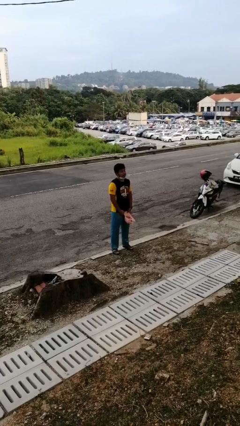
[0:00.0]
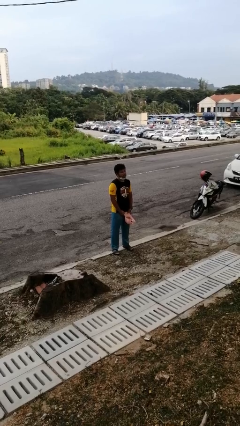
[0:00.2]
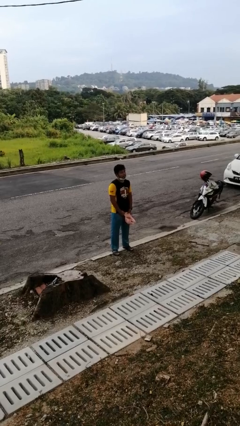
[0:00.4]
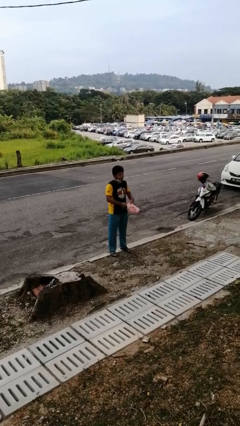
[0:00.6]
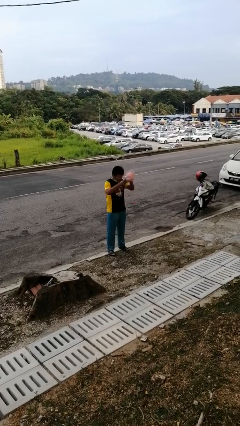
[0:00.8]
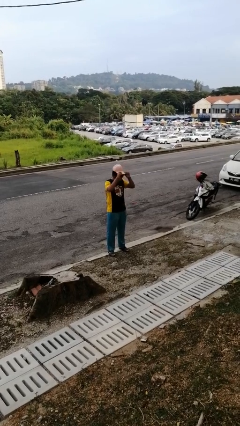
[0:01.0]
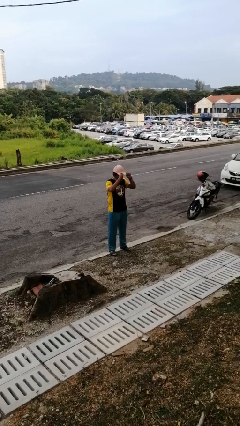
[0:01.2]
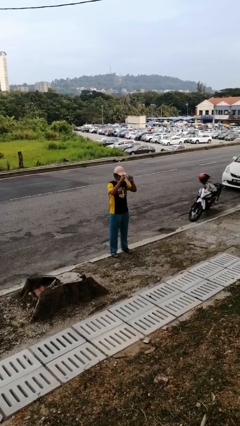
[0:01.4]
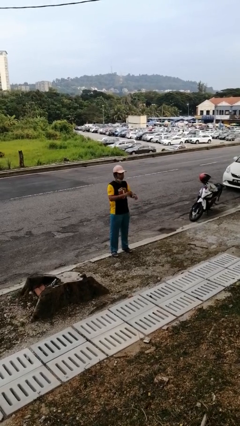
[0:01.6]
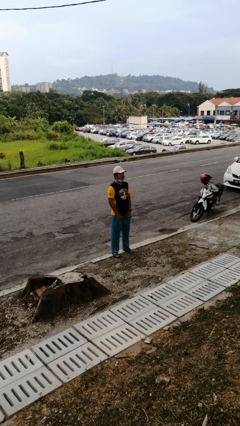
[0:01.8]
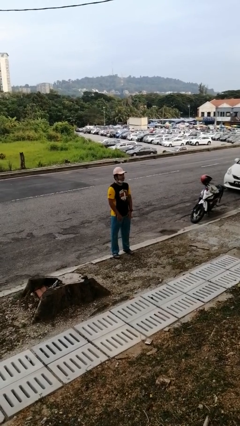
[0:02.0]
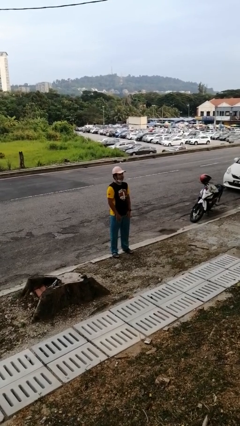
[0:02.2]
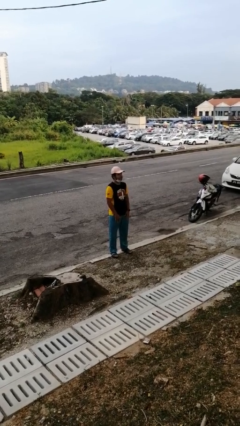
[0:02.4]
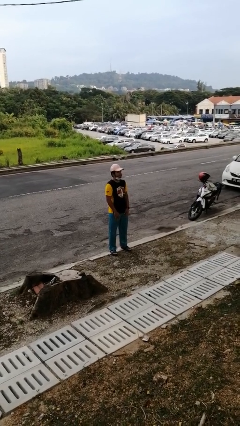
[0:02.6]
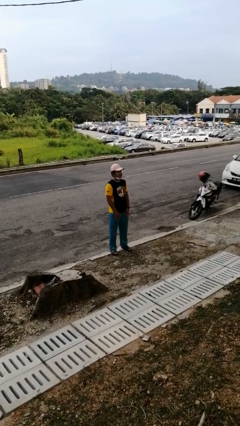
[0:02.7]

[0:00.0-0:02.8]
person puts on hat

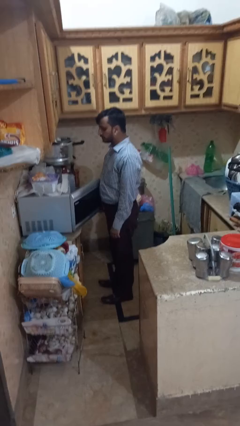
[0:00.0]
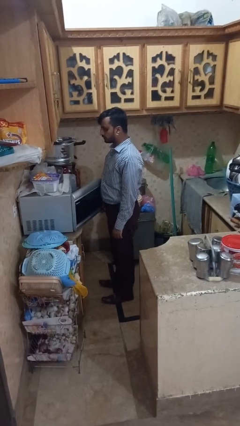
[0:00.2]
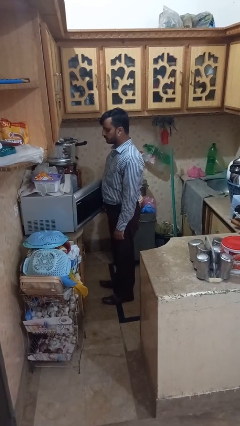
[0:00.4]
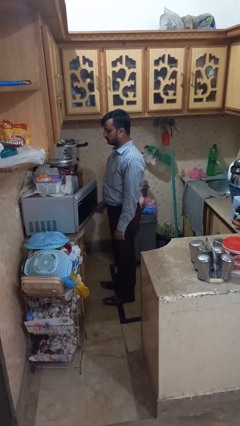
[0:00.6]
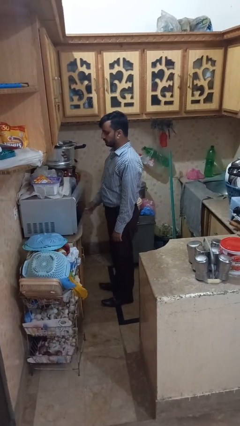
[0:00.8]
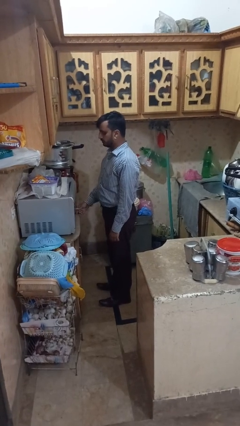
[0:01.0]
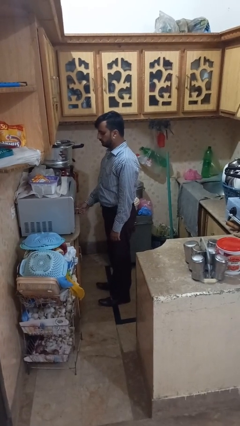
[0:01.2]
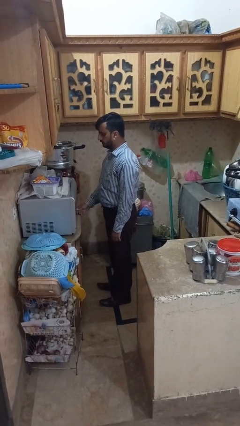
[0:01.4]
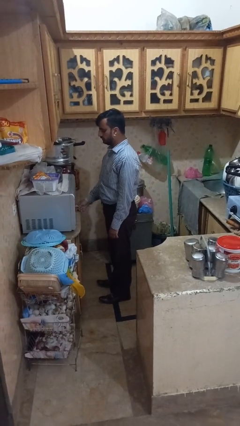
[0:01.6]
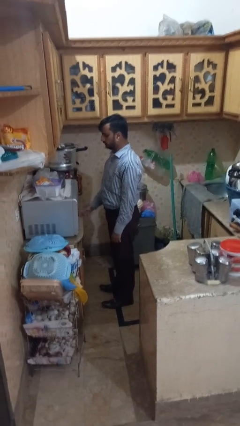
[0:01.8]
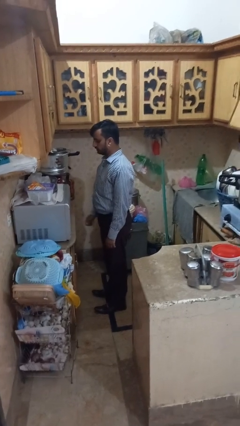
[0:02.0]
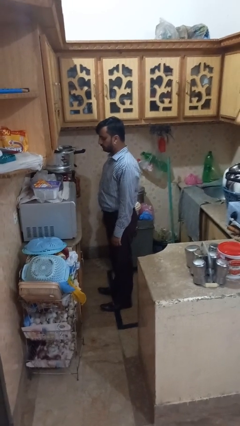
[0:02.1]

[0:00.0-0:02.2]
person closes microwave

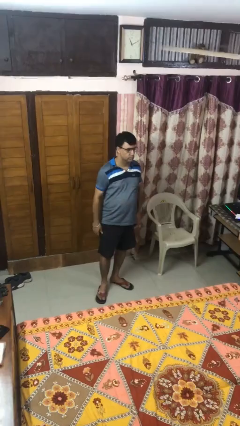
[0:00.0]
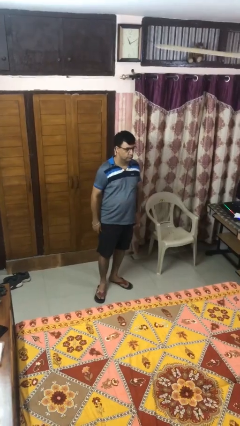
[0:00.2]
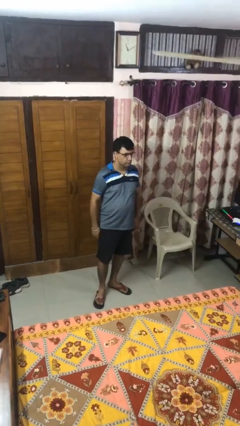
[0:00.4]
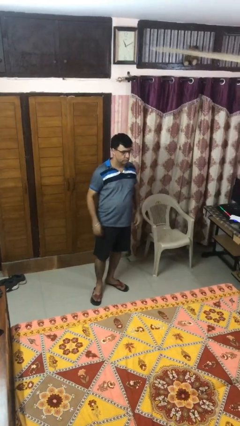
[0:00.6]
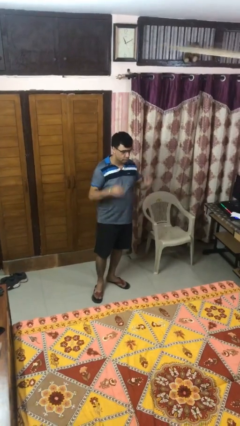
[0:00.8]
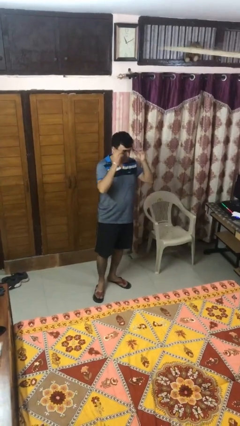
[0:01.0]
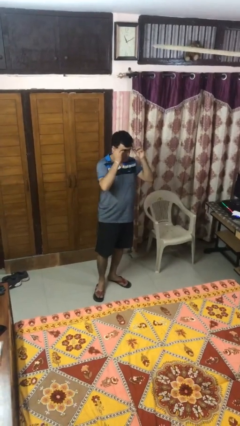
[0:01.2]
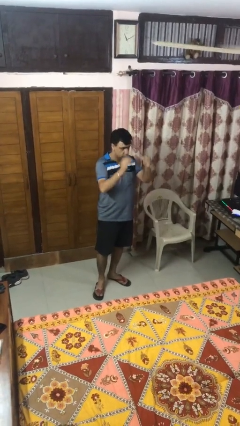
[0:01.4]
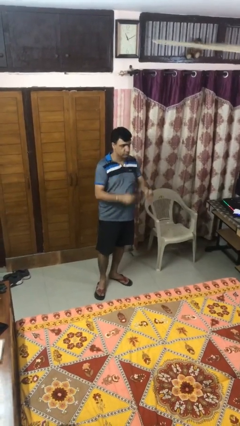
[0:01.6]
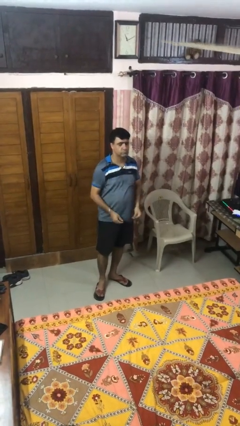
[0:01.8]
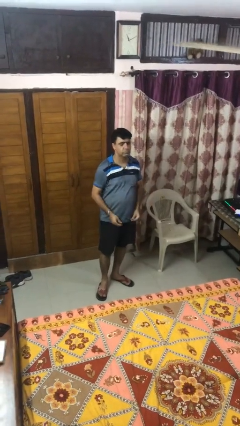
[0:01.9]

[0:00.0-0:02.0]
person takes off glasses

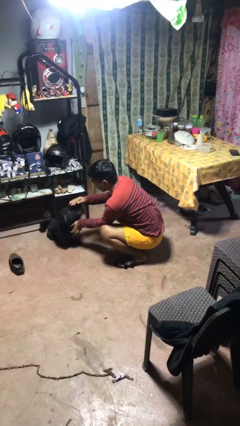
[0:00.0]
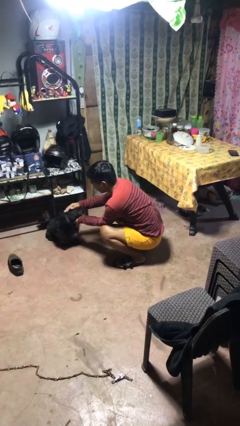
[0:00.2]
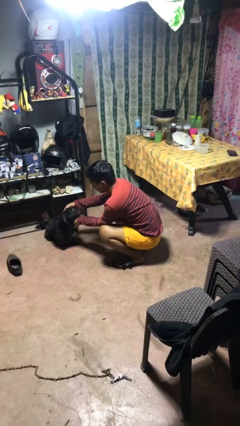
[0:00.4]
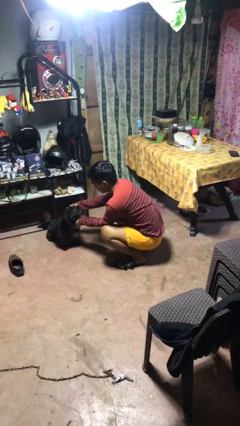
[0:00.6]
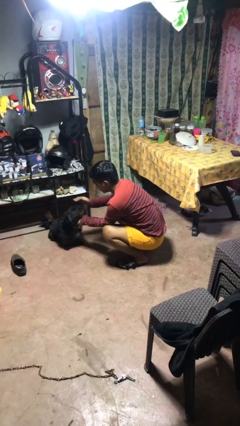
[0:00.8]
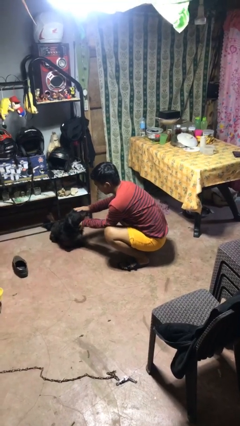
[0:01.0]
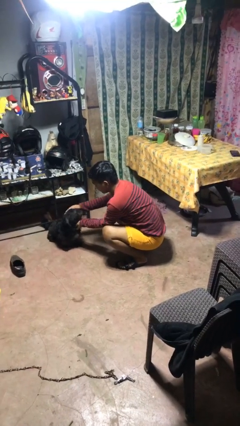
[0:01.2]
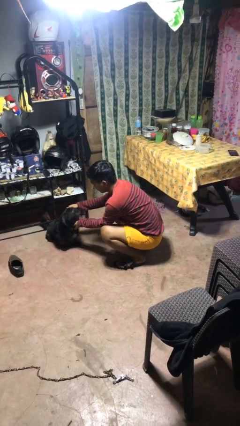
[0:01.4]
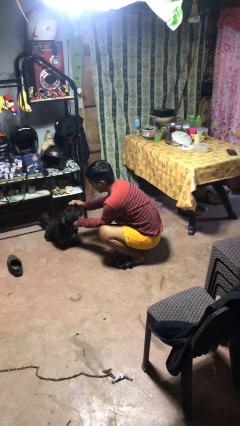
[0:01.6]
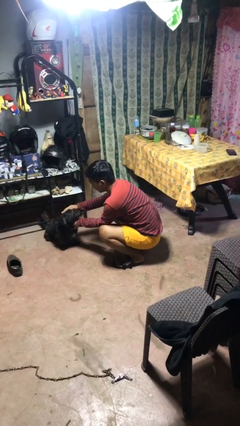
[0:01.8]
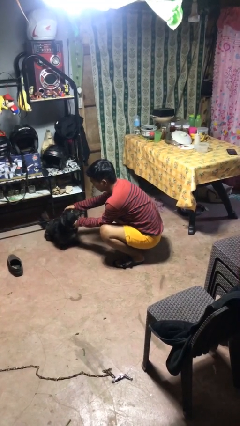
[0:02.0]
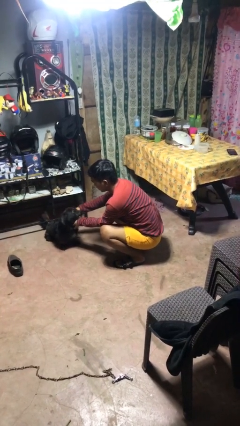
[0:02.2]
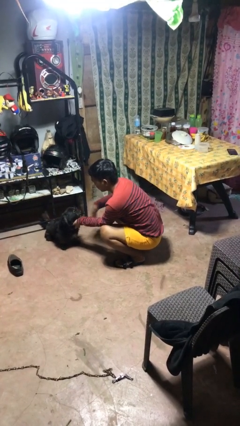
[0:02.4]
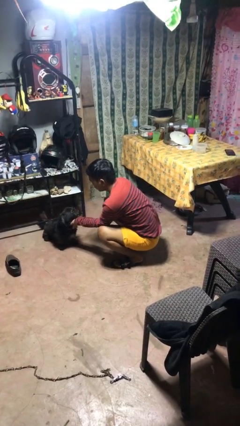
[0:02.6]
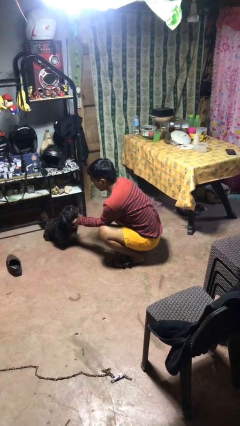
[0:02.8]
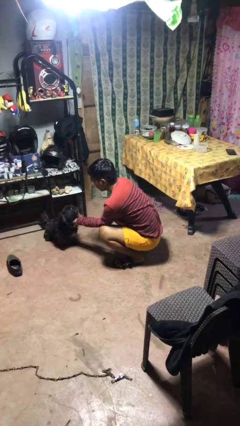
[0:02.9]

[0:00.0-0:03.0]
person pets dog

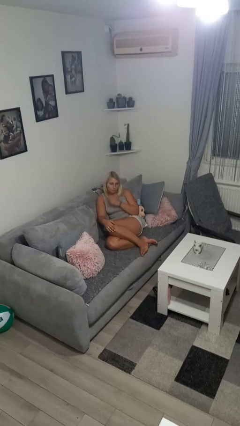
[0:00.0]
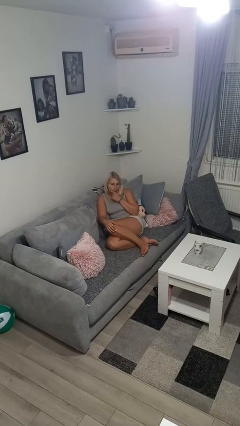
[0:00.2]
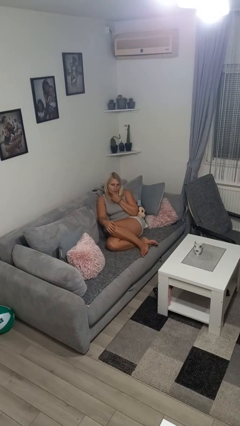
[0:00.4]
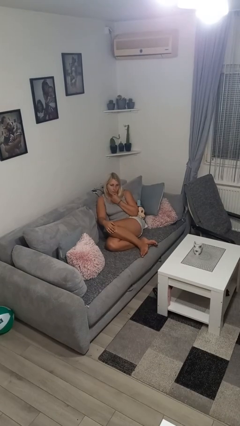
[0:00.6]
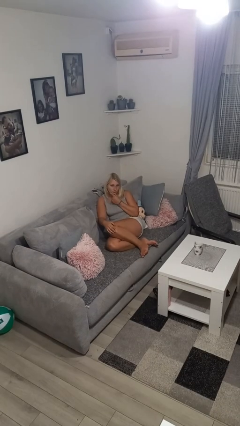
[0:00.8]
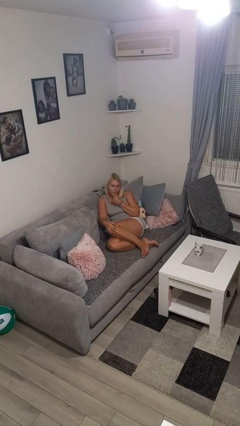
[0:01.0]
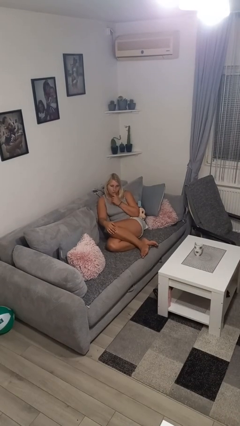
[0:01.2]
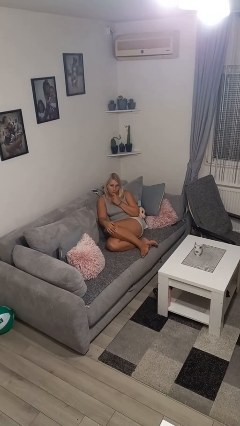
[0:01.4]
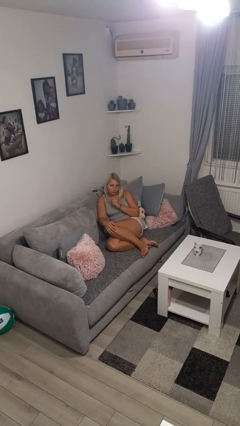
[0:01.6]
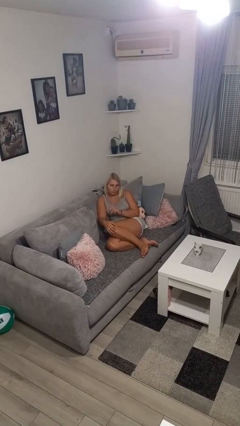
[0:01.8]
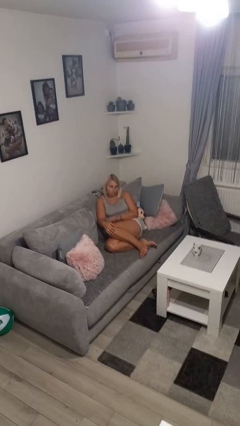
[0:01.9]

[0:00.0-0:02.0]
person strokes chin

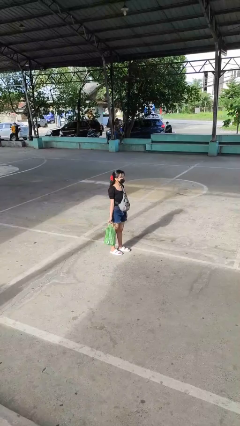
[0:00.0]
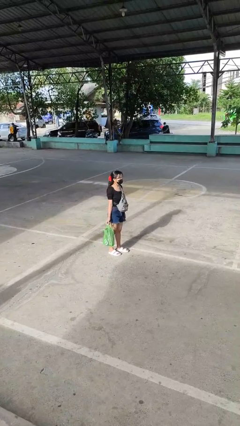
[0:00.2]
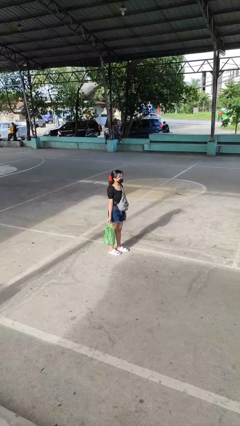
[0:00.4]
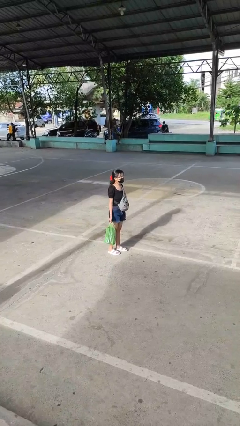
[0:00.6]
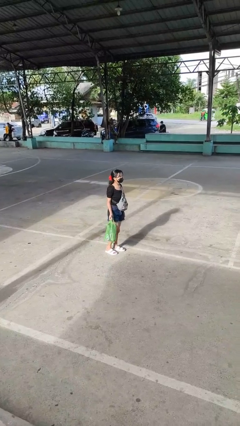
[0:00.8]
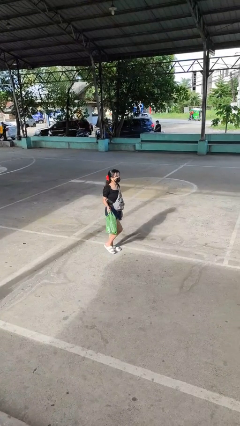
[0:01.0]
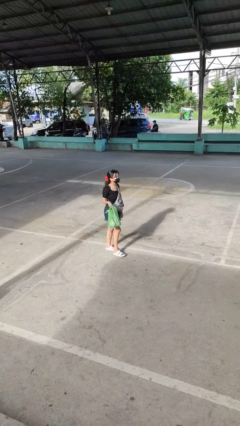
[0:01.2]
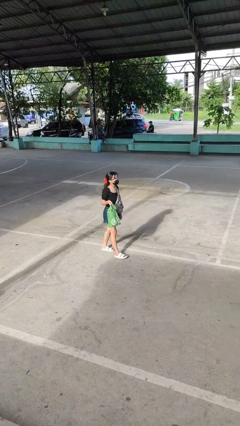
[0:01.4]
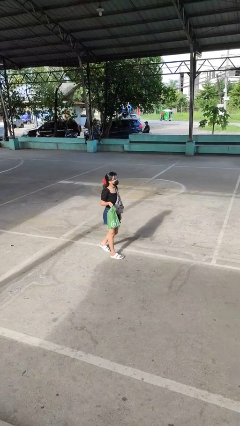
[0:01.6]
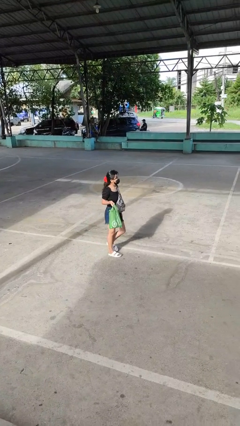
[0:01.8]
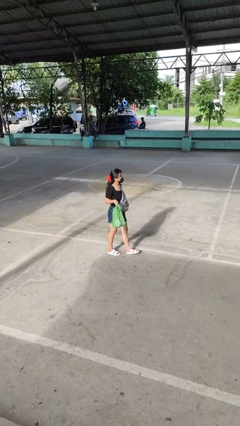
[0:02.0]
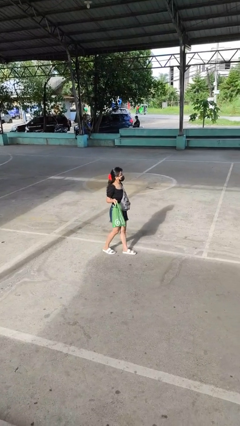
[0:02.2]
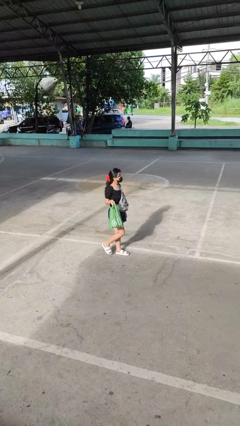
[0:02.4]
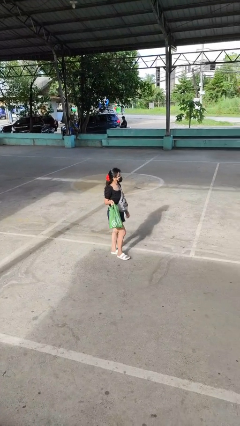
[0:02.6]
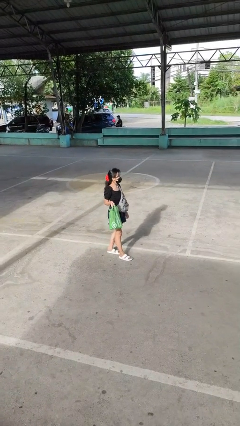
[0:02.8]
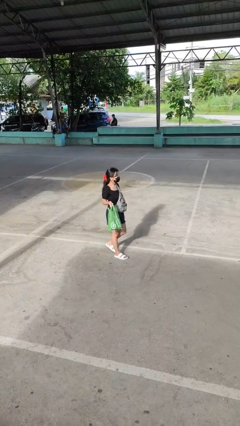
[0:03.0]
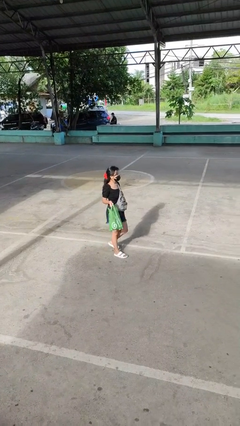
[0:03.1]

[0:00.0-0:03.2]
person carries groceries

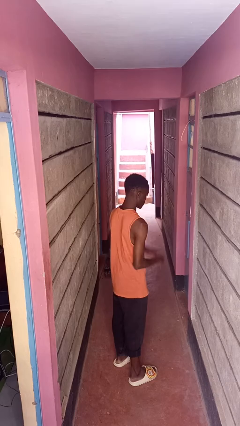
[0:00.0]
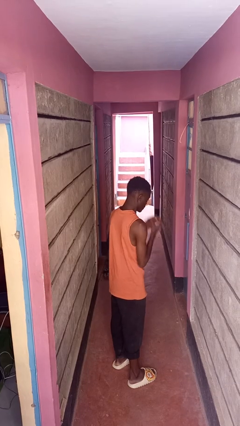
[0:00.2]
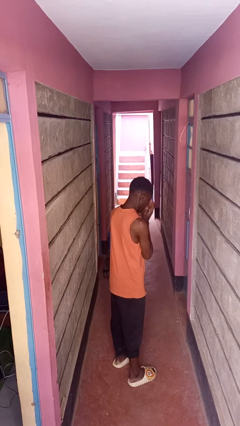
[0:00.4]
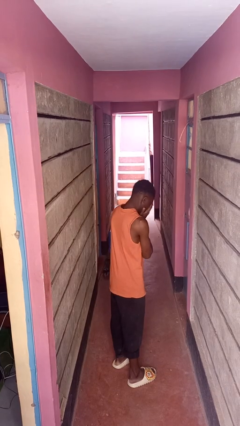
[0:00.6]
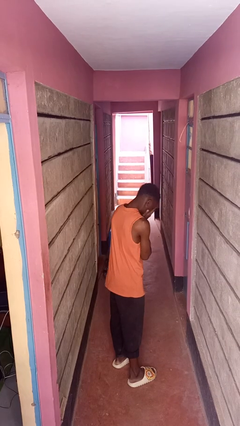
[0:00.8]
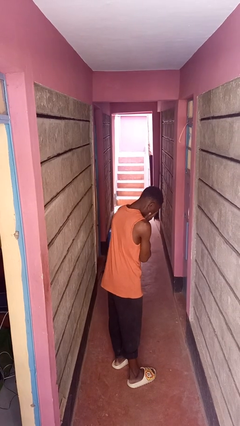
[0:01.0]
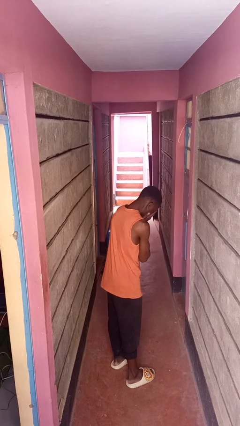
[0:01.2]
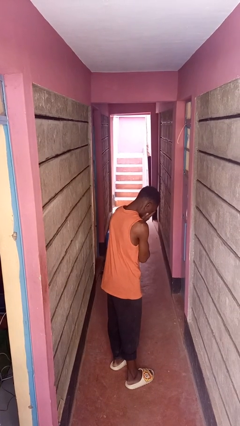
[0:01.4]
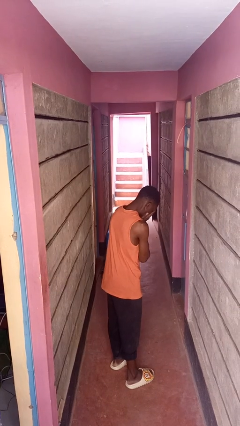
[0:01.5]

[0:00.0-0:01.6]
person sneezes into hand

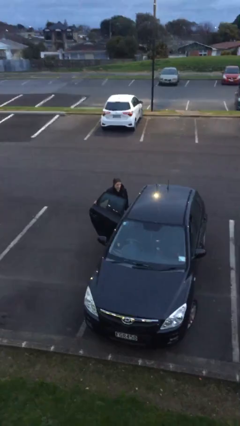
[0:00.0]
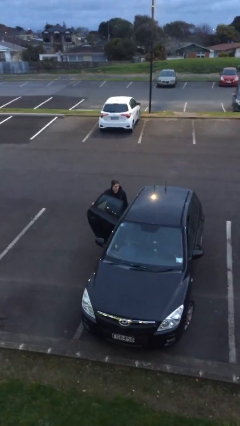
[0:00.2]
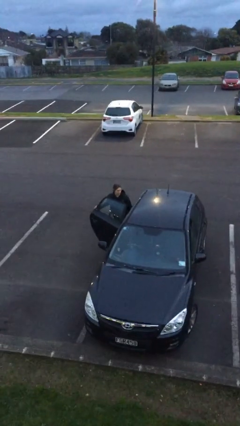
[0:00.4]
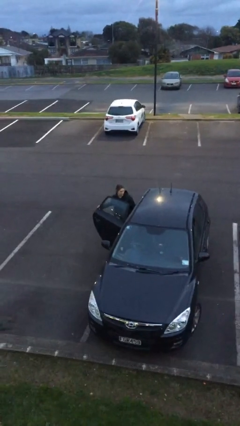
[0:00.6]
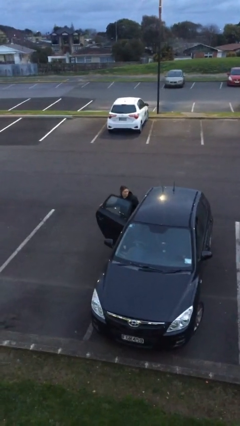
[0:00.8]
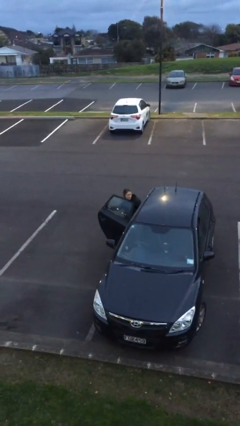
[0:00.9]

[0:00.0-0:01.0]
person enters car
